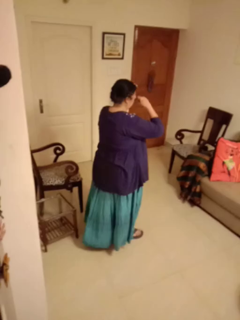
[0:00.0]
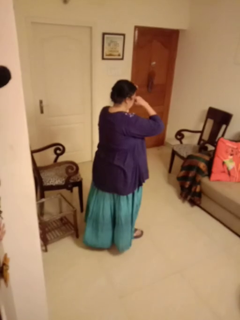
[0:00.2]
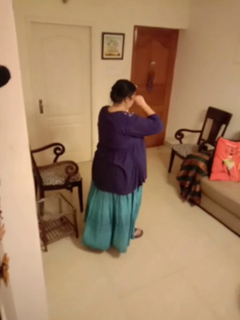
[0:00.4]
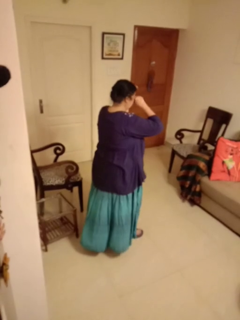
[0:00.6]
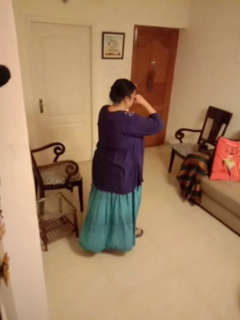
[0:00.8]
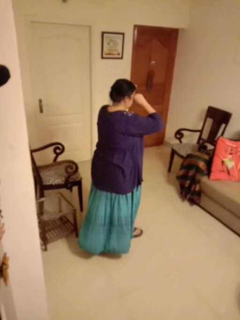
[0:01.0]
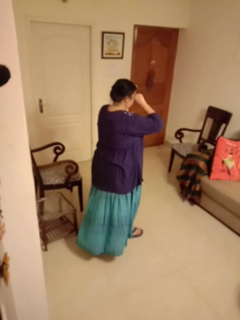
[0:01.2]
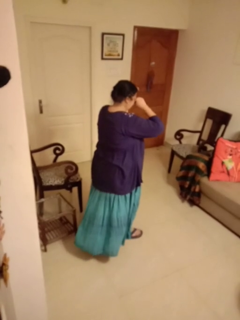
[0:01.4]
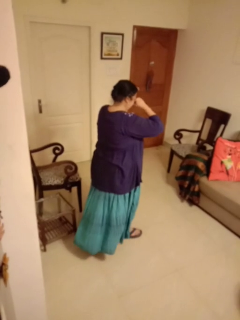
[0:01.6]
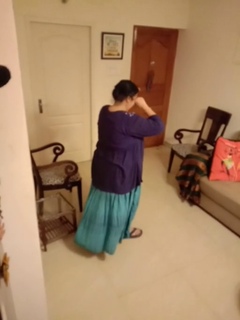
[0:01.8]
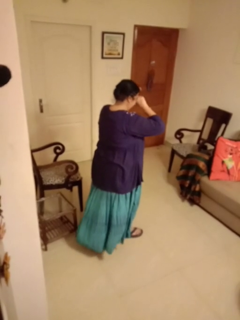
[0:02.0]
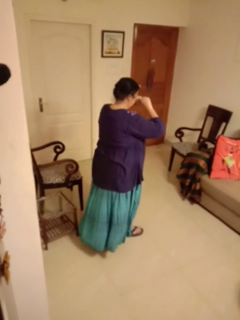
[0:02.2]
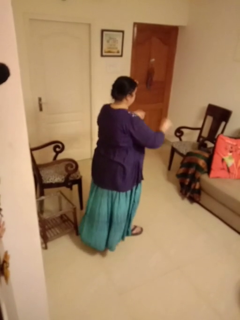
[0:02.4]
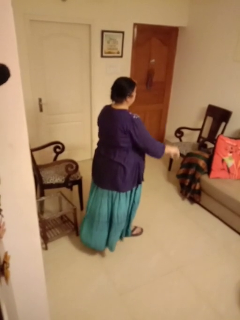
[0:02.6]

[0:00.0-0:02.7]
person rubs eyes

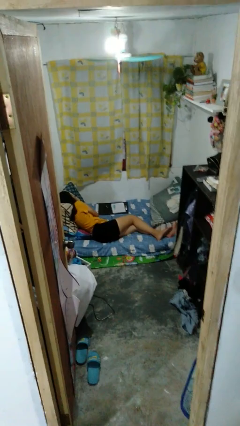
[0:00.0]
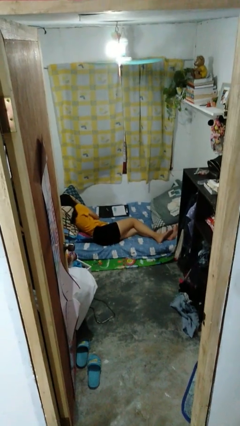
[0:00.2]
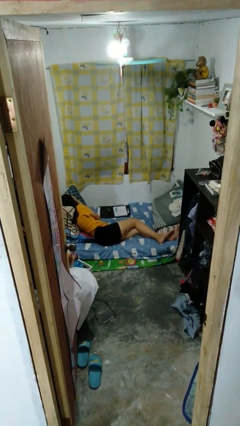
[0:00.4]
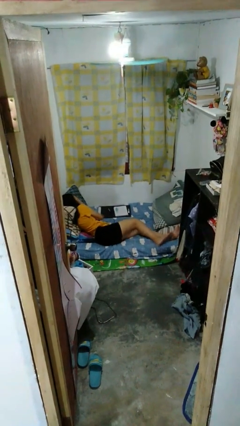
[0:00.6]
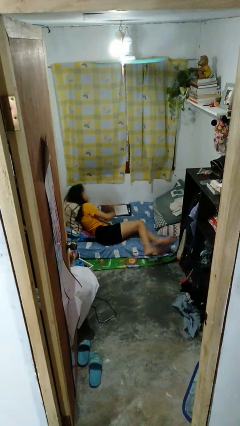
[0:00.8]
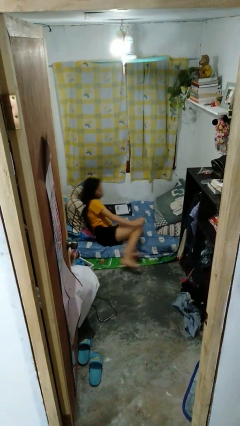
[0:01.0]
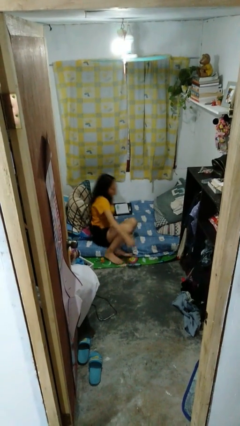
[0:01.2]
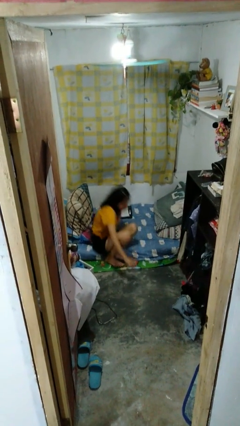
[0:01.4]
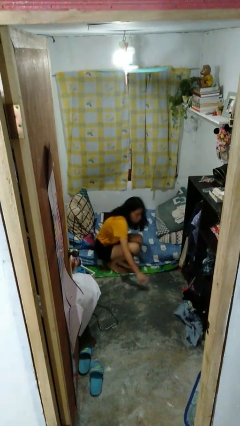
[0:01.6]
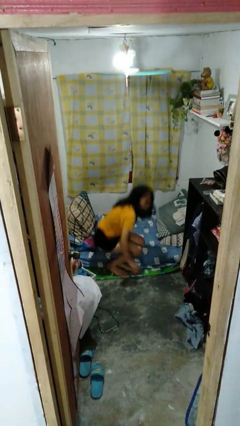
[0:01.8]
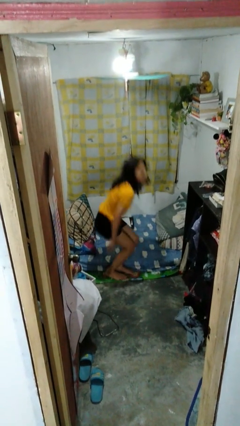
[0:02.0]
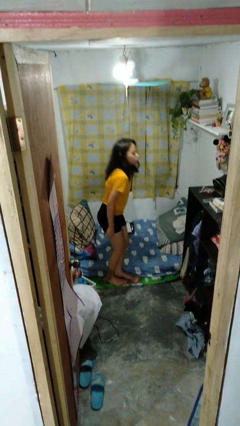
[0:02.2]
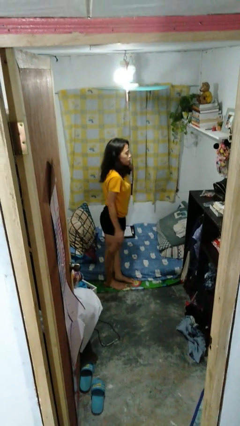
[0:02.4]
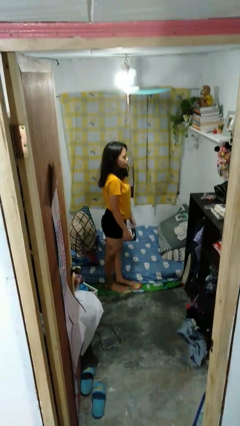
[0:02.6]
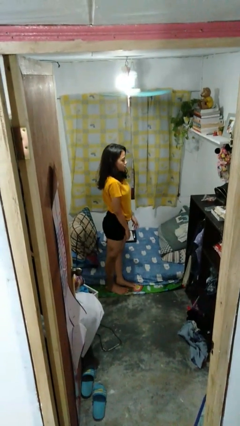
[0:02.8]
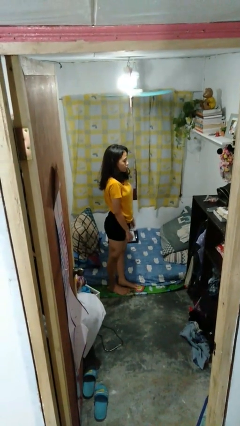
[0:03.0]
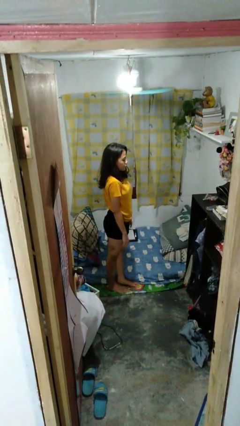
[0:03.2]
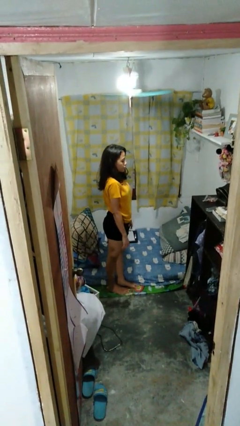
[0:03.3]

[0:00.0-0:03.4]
person stands up

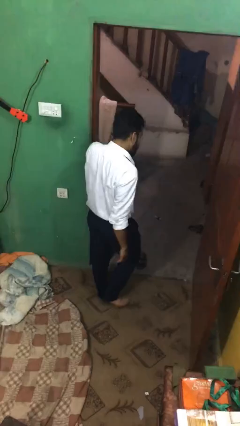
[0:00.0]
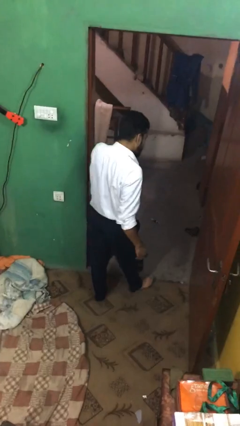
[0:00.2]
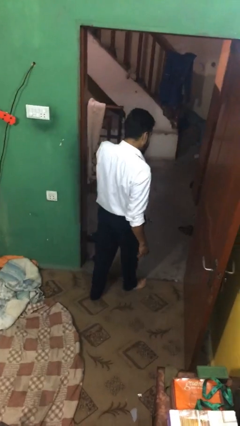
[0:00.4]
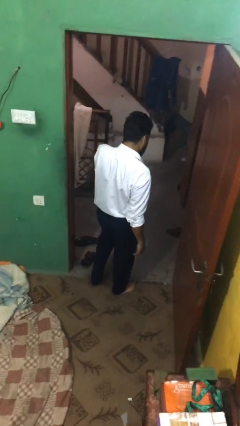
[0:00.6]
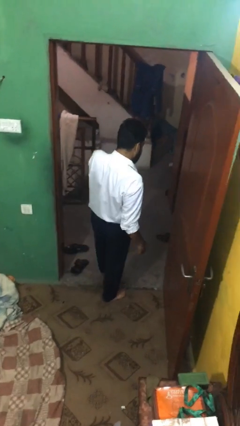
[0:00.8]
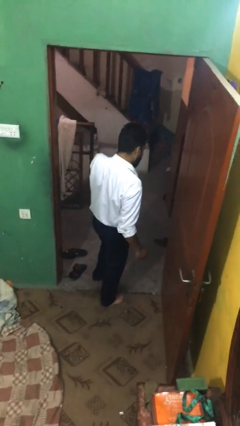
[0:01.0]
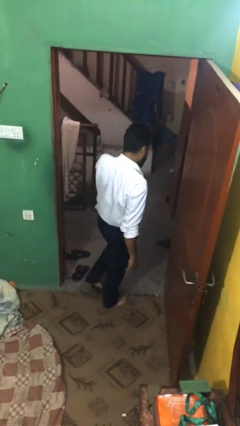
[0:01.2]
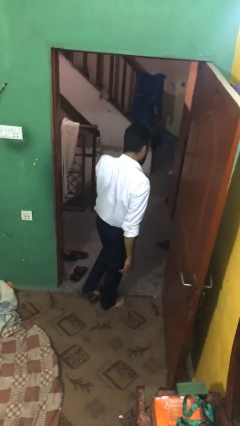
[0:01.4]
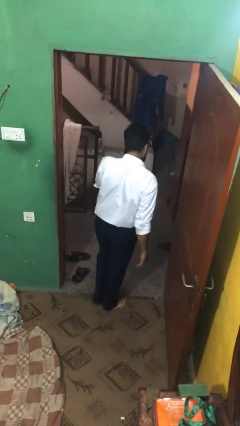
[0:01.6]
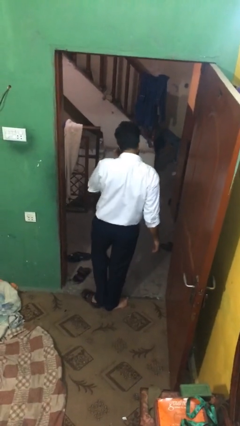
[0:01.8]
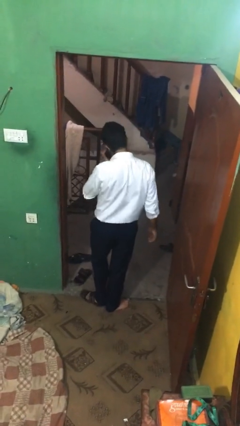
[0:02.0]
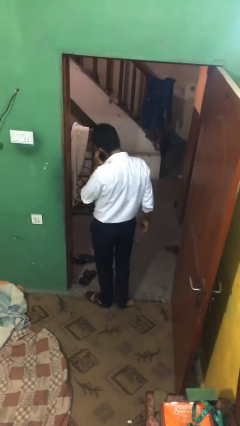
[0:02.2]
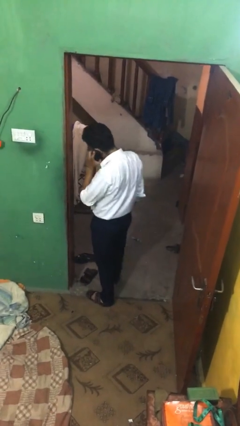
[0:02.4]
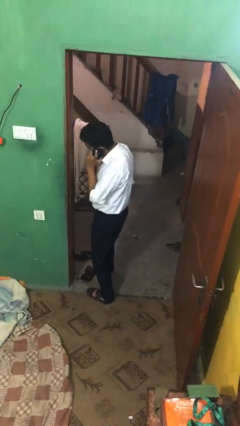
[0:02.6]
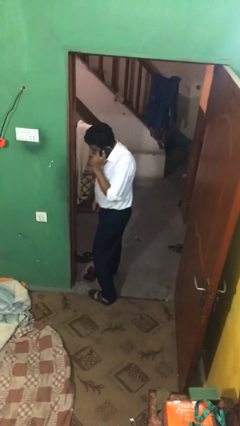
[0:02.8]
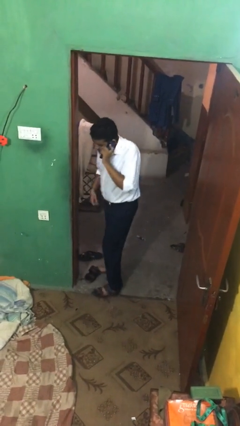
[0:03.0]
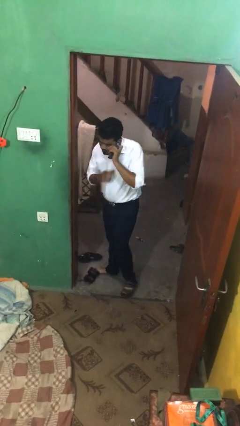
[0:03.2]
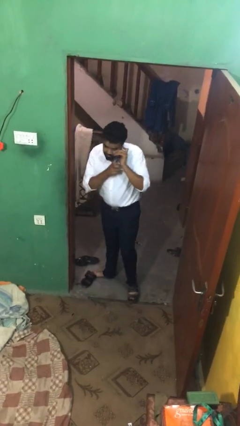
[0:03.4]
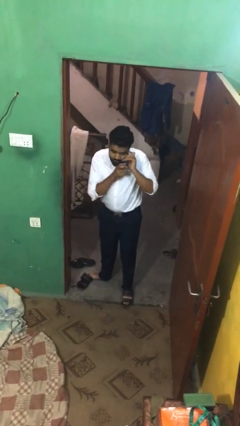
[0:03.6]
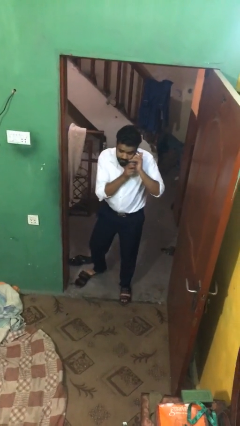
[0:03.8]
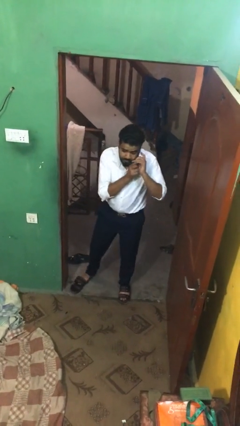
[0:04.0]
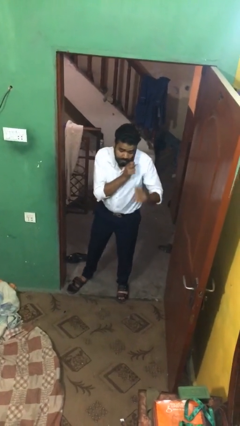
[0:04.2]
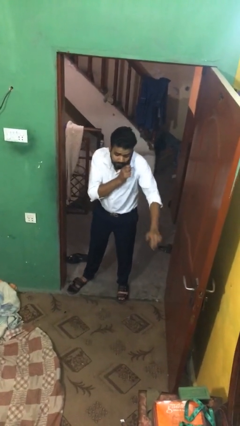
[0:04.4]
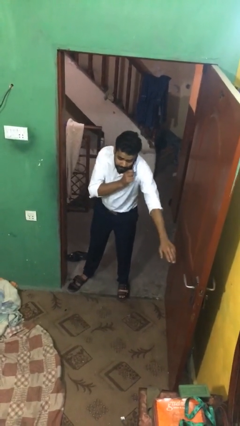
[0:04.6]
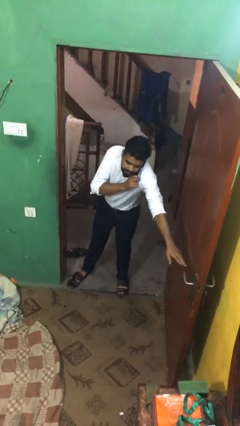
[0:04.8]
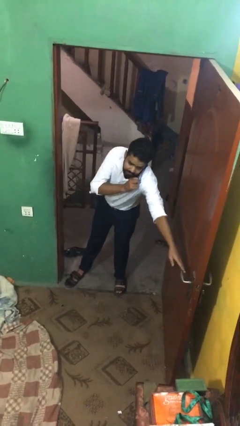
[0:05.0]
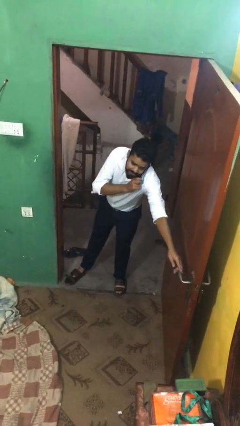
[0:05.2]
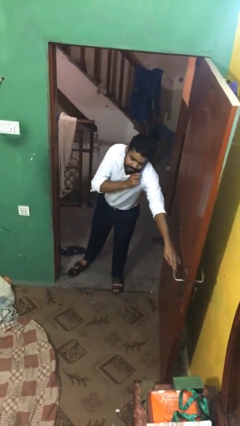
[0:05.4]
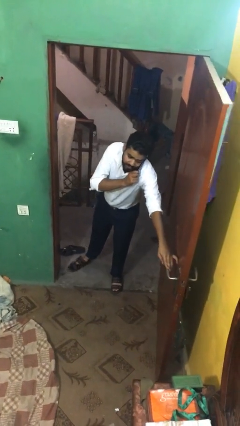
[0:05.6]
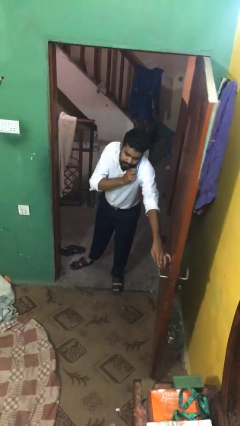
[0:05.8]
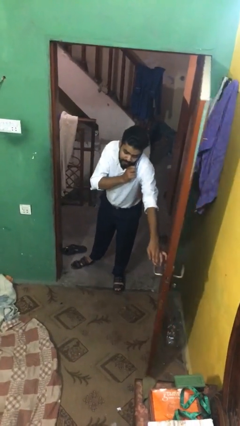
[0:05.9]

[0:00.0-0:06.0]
person exits scene through structure

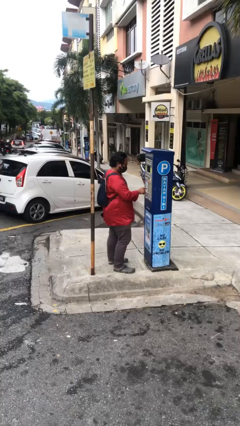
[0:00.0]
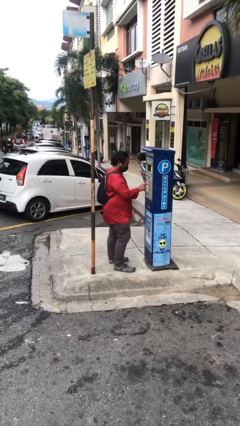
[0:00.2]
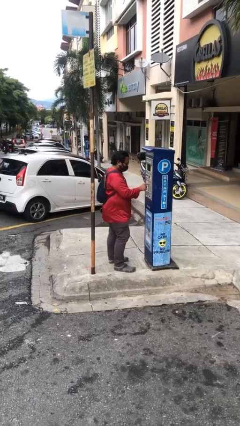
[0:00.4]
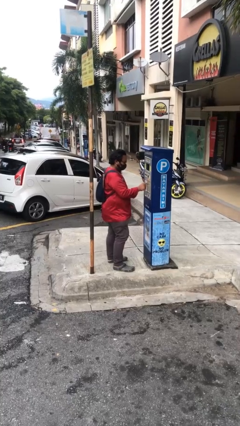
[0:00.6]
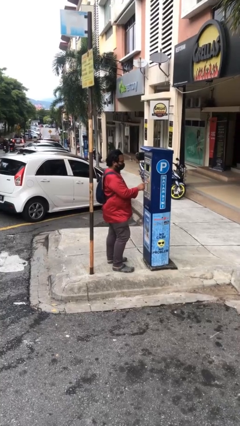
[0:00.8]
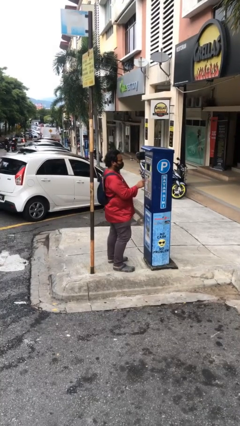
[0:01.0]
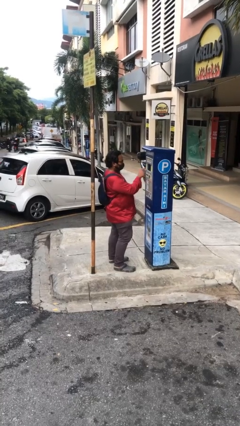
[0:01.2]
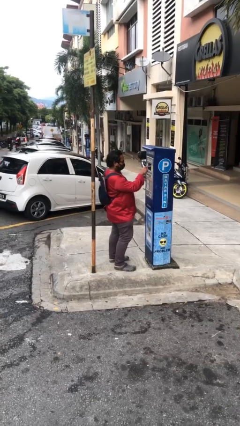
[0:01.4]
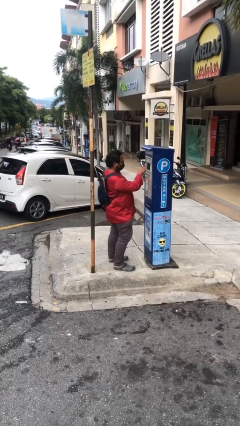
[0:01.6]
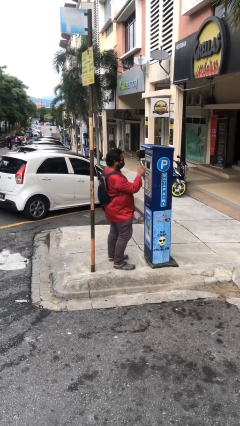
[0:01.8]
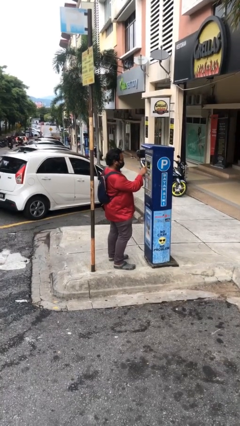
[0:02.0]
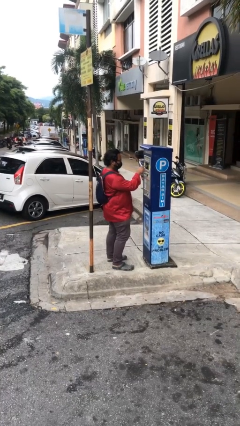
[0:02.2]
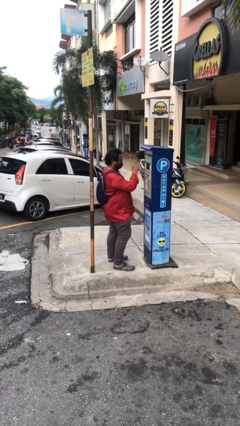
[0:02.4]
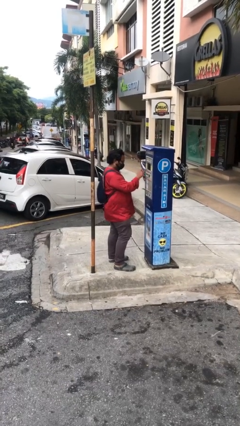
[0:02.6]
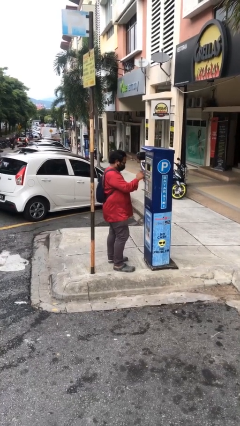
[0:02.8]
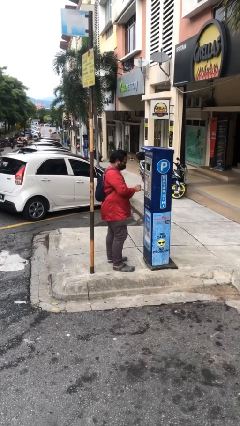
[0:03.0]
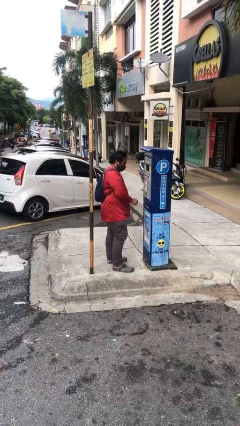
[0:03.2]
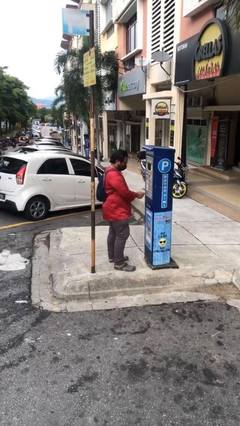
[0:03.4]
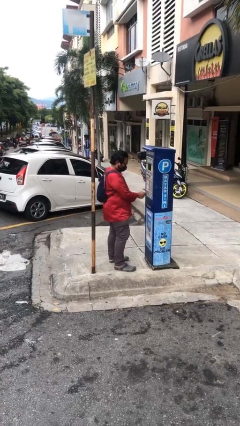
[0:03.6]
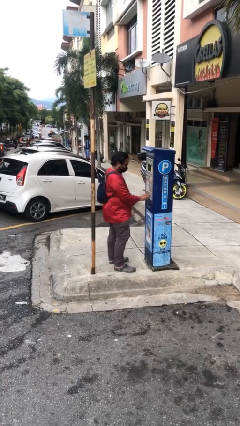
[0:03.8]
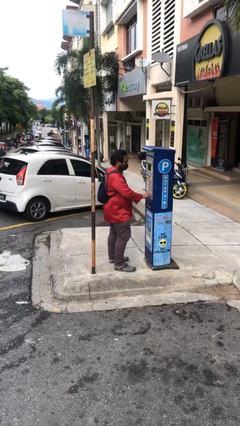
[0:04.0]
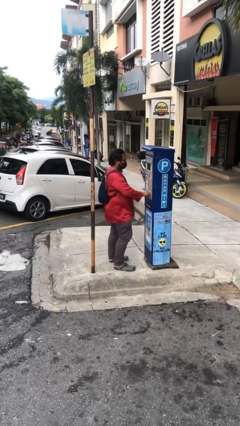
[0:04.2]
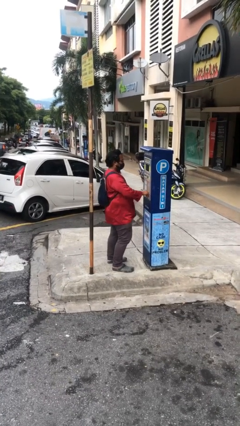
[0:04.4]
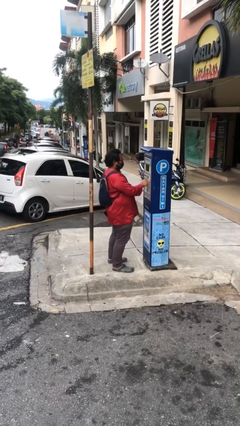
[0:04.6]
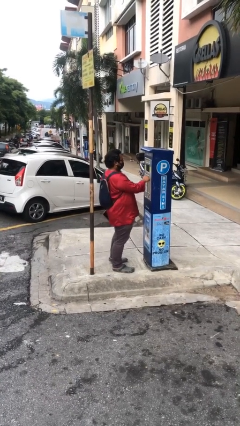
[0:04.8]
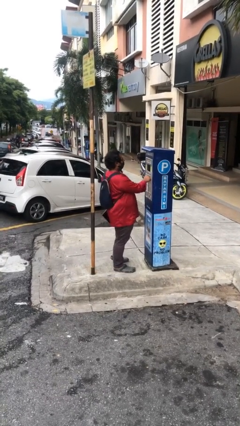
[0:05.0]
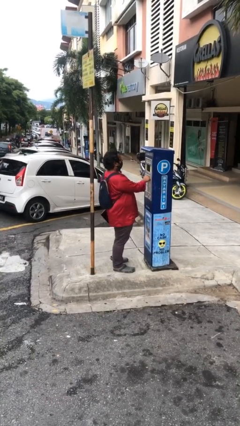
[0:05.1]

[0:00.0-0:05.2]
person purchases from machine

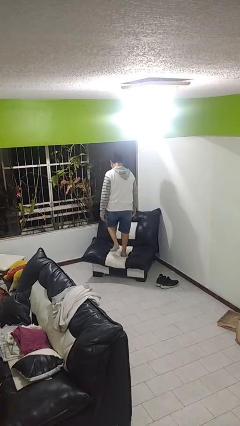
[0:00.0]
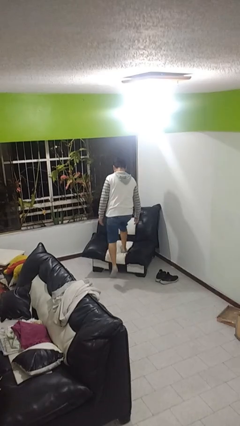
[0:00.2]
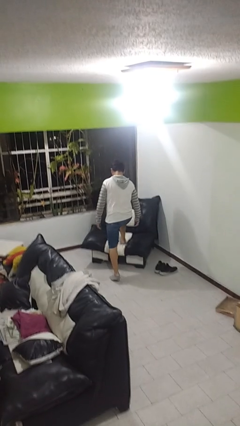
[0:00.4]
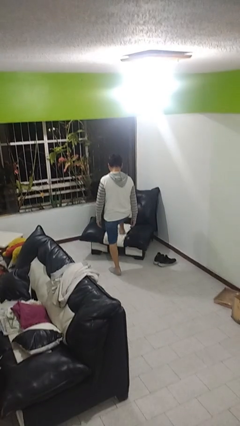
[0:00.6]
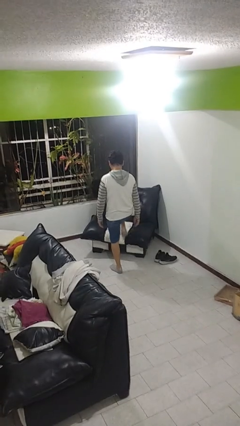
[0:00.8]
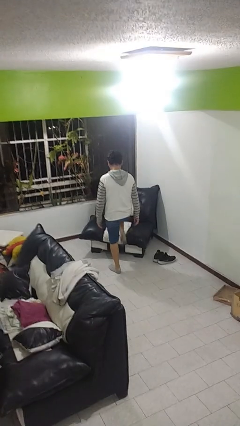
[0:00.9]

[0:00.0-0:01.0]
person climbs off couch
